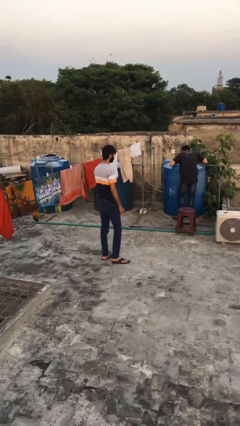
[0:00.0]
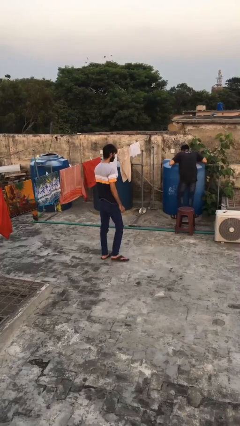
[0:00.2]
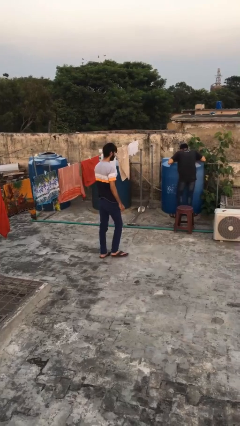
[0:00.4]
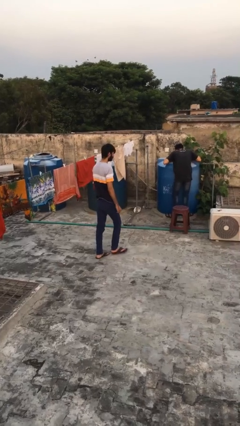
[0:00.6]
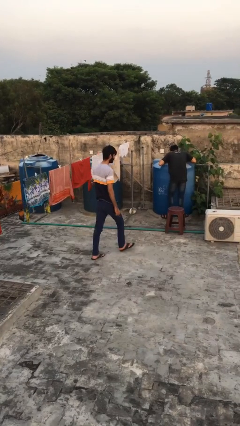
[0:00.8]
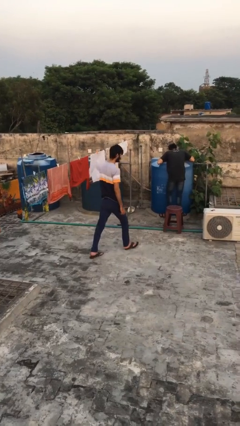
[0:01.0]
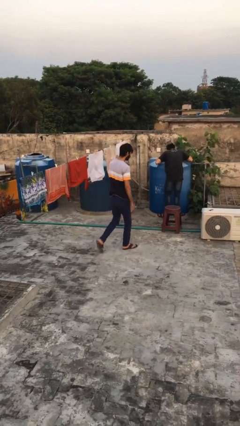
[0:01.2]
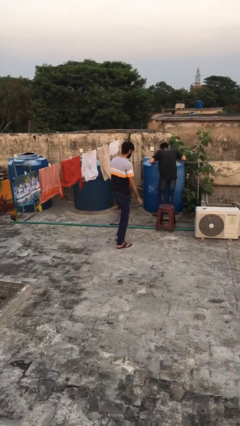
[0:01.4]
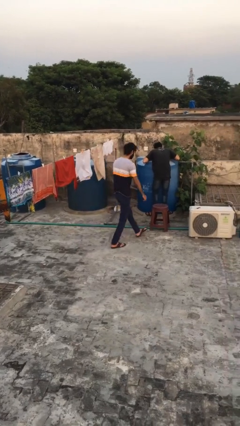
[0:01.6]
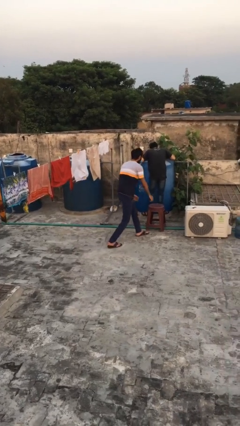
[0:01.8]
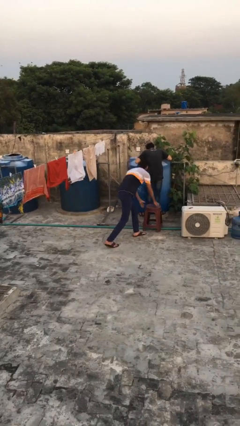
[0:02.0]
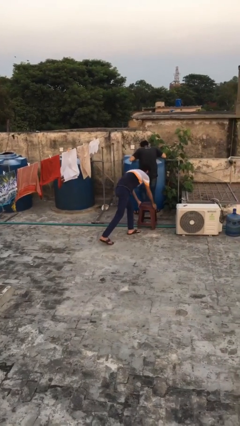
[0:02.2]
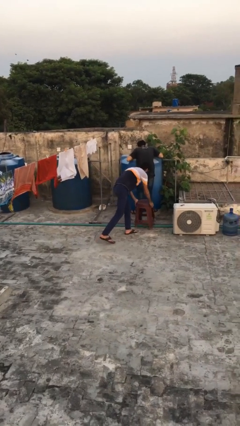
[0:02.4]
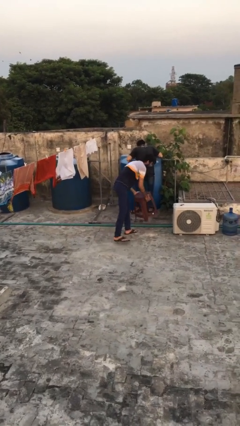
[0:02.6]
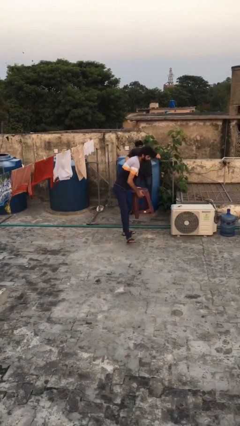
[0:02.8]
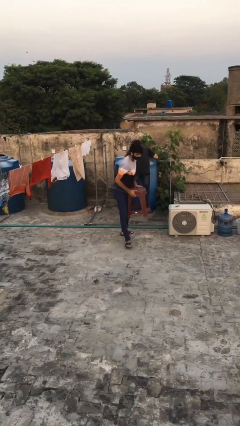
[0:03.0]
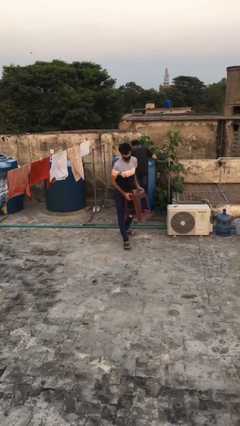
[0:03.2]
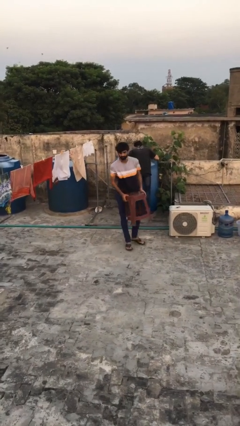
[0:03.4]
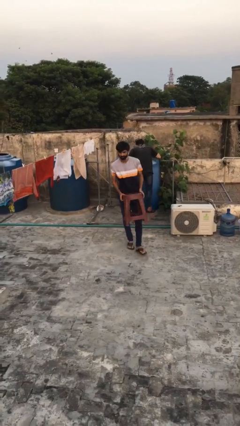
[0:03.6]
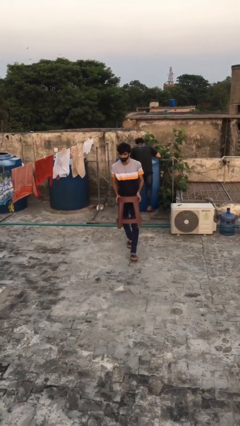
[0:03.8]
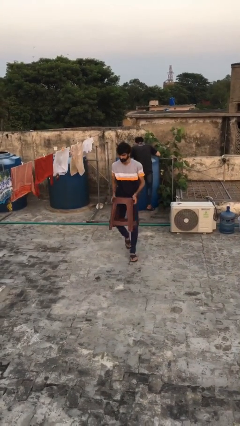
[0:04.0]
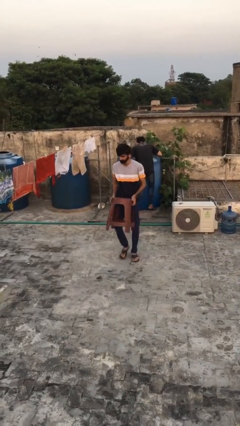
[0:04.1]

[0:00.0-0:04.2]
person steals object from person

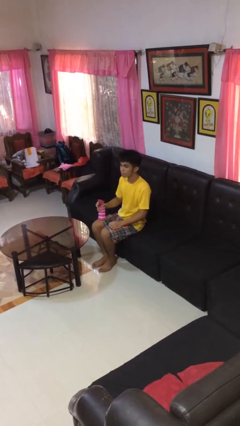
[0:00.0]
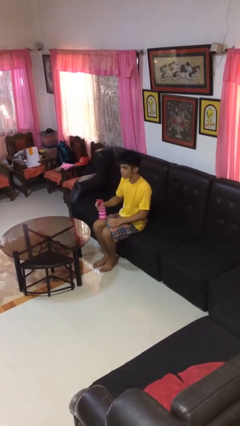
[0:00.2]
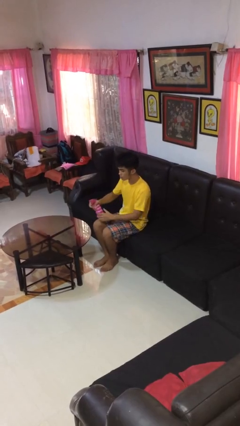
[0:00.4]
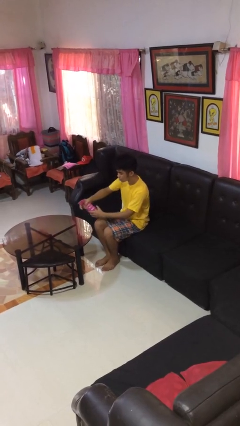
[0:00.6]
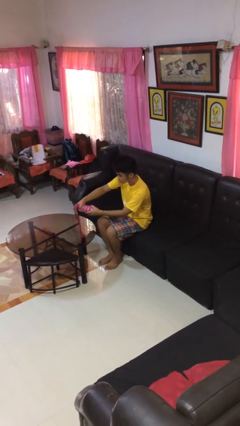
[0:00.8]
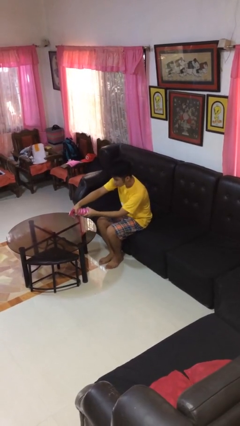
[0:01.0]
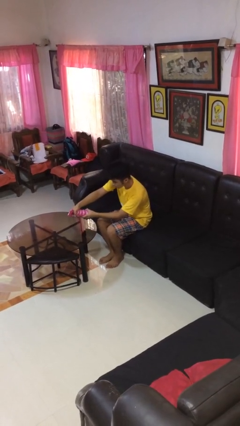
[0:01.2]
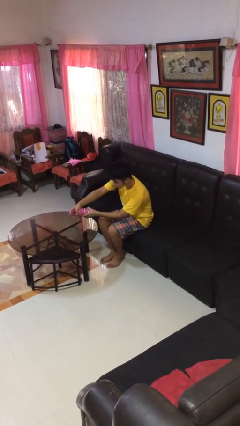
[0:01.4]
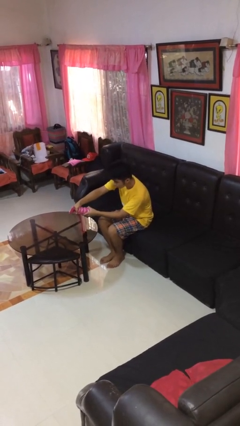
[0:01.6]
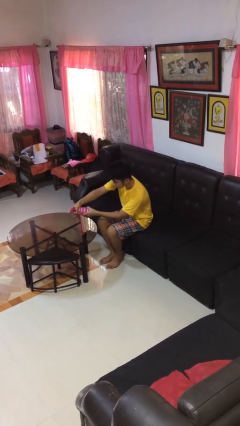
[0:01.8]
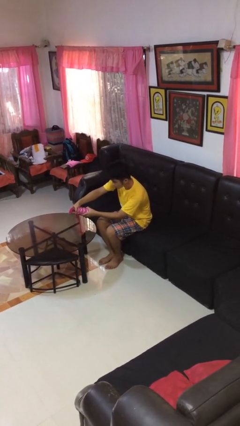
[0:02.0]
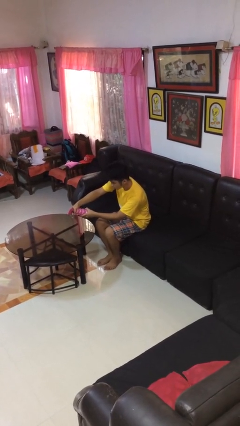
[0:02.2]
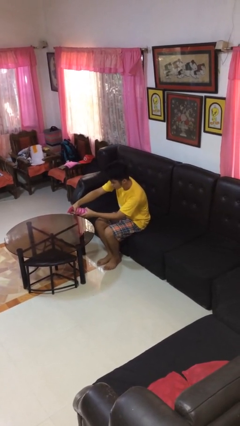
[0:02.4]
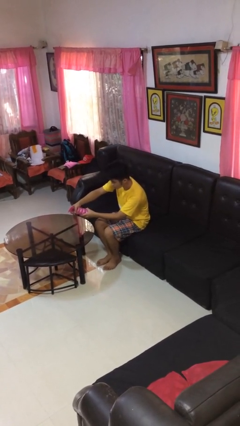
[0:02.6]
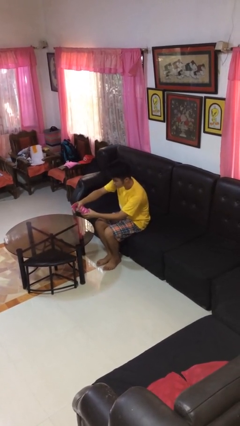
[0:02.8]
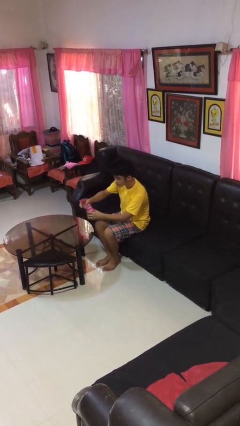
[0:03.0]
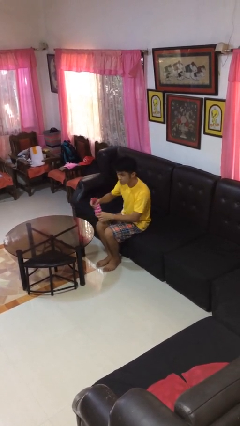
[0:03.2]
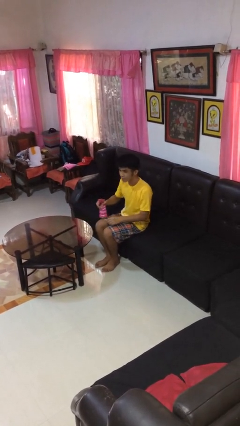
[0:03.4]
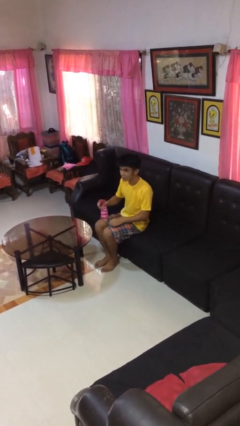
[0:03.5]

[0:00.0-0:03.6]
person sprays from bottle

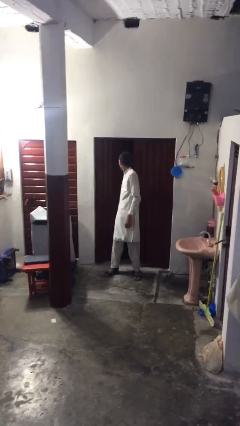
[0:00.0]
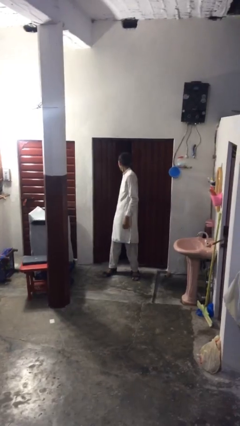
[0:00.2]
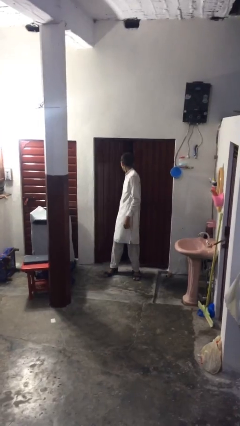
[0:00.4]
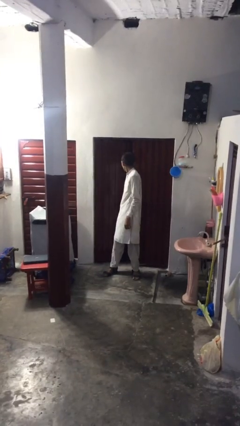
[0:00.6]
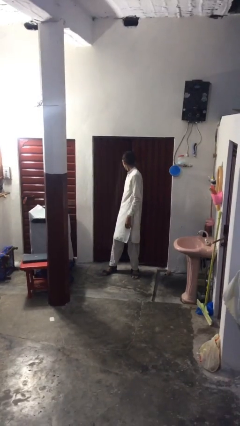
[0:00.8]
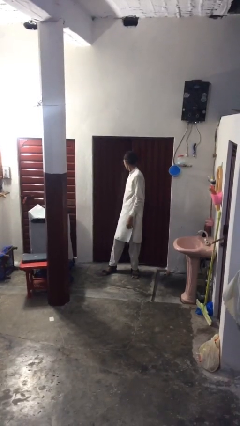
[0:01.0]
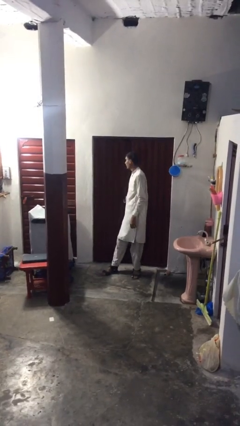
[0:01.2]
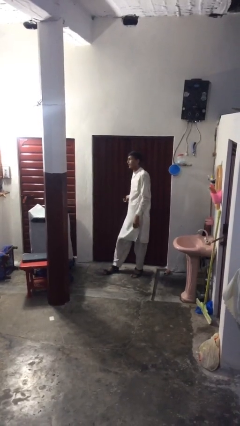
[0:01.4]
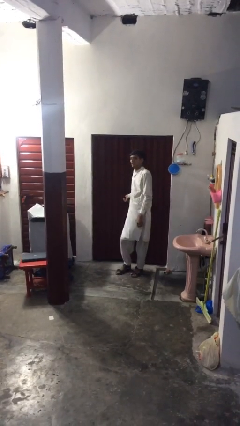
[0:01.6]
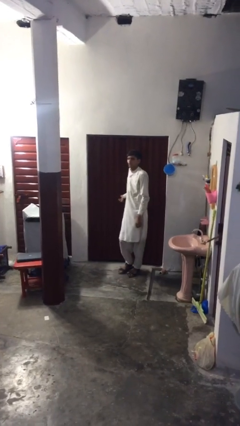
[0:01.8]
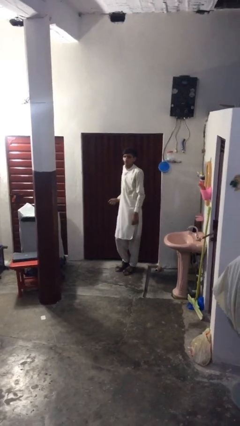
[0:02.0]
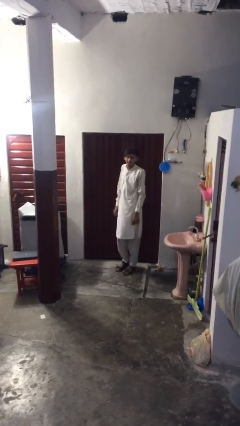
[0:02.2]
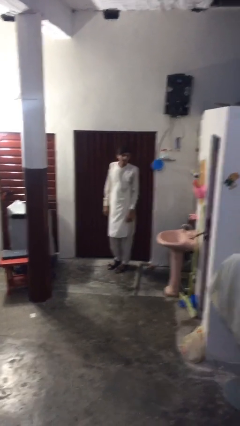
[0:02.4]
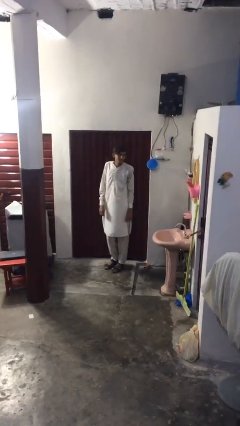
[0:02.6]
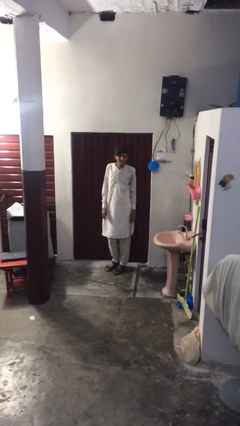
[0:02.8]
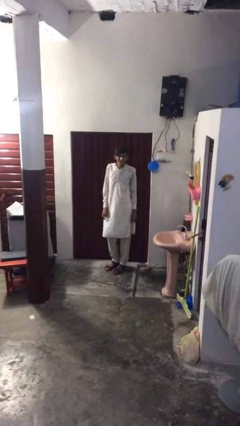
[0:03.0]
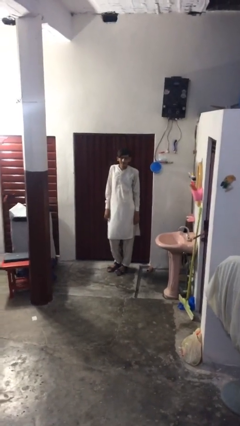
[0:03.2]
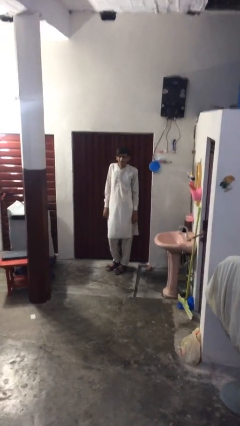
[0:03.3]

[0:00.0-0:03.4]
person closes facility door

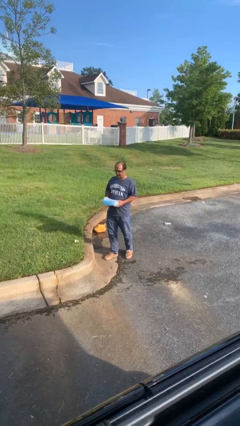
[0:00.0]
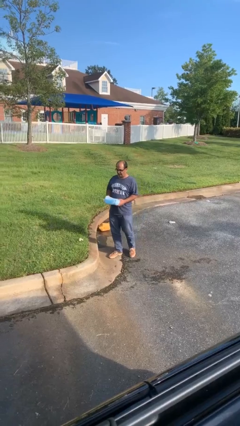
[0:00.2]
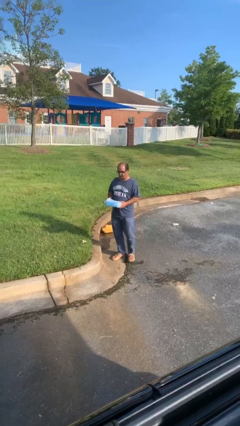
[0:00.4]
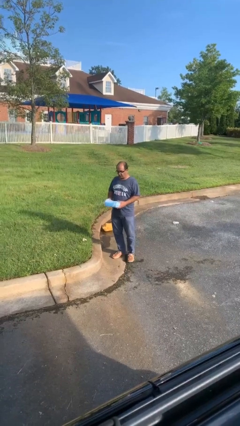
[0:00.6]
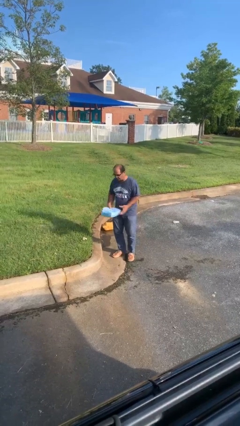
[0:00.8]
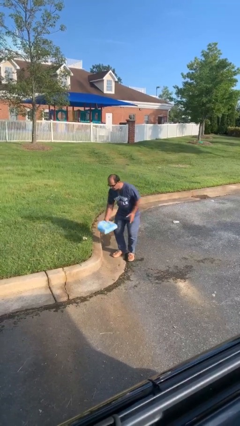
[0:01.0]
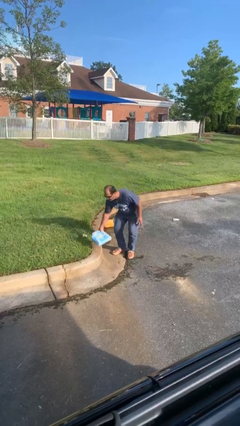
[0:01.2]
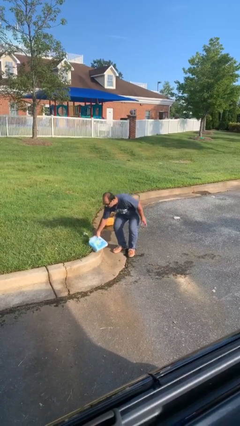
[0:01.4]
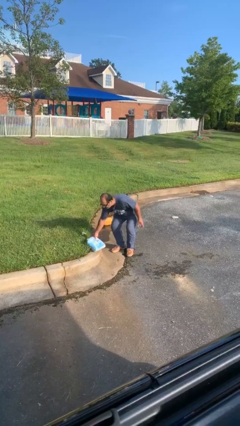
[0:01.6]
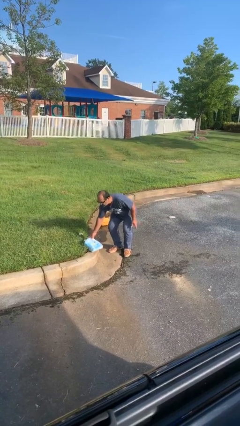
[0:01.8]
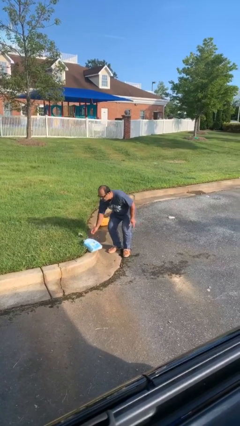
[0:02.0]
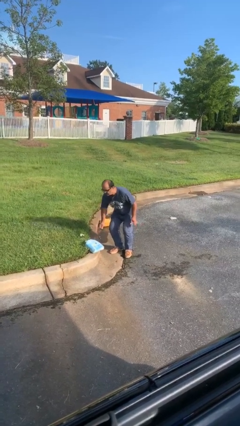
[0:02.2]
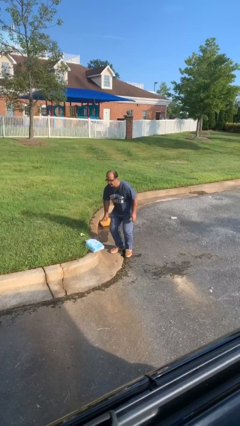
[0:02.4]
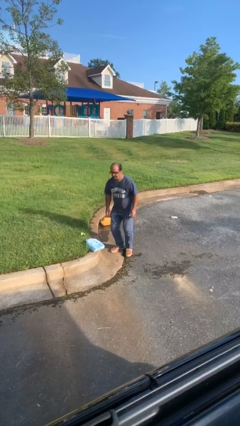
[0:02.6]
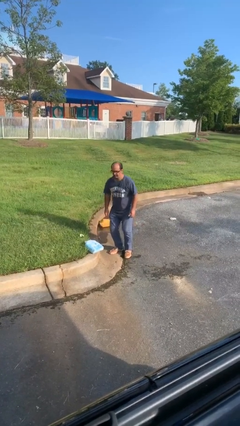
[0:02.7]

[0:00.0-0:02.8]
person puts down object on floor

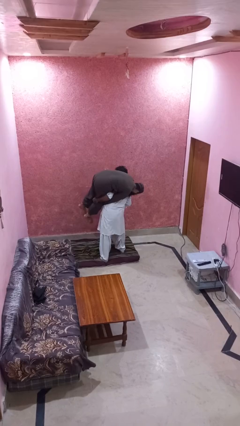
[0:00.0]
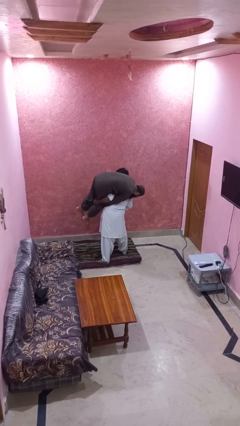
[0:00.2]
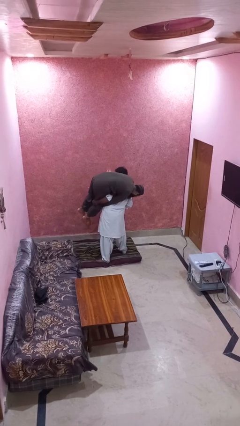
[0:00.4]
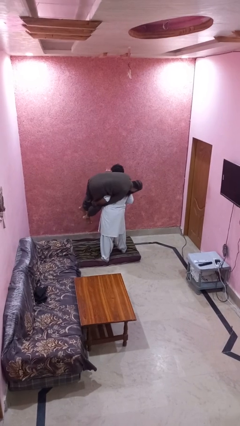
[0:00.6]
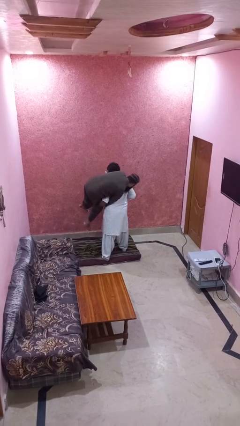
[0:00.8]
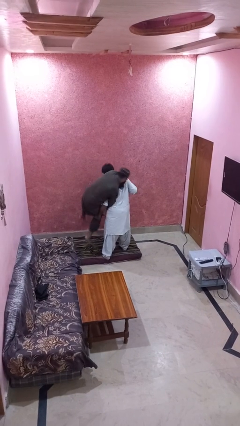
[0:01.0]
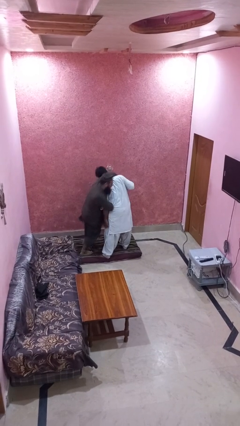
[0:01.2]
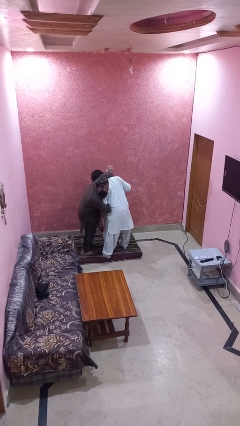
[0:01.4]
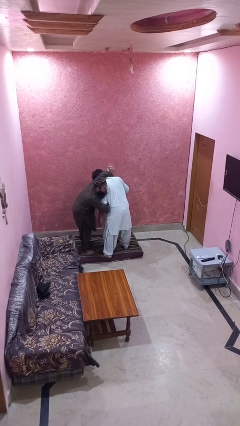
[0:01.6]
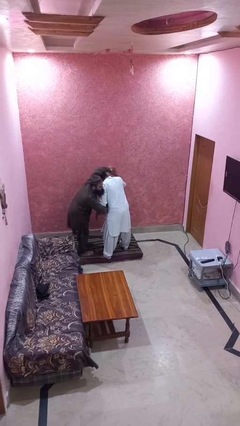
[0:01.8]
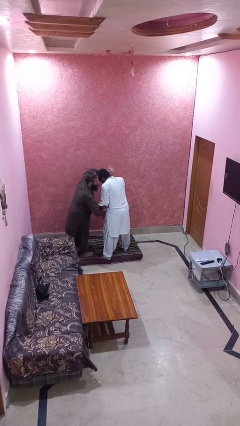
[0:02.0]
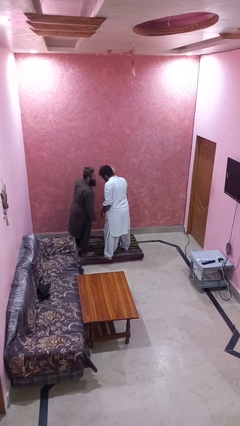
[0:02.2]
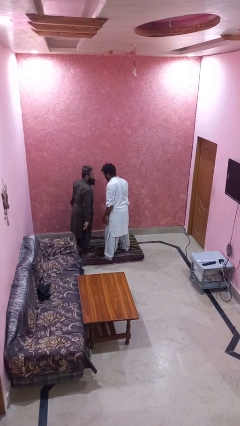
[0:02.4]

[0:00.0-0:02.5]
person puts down person

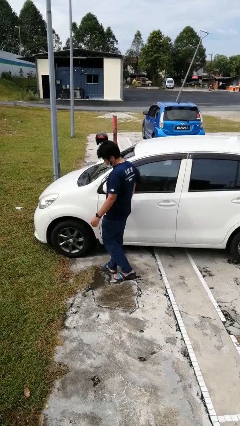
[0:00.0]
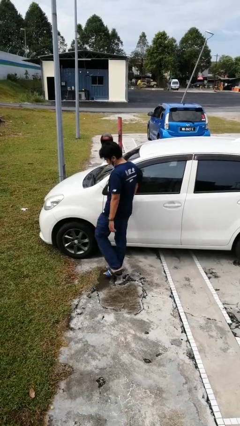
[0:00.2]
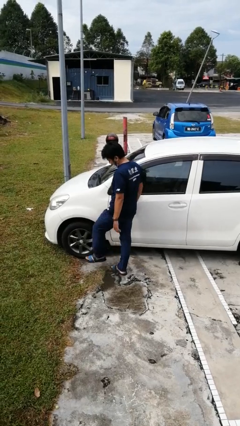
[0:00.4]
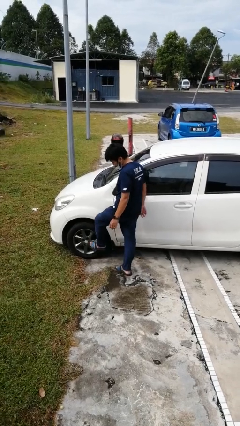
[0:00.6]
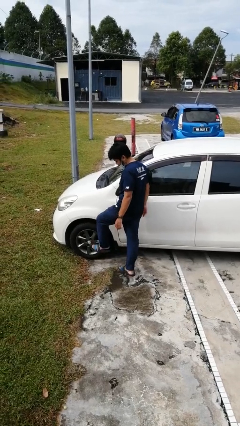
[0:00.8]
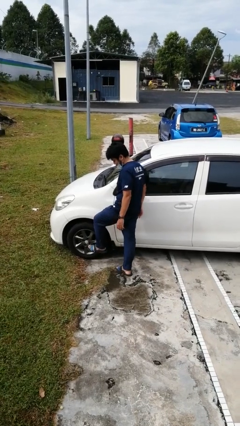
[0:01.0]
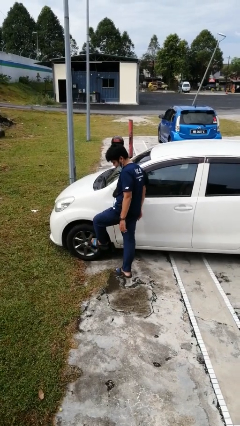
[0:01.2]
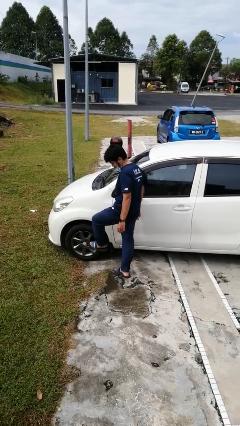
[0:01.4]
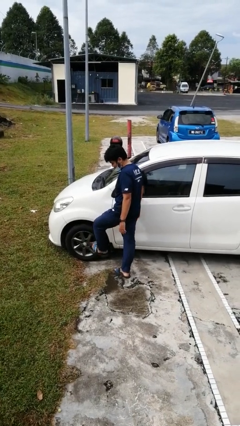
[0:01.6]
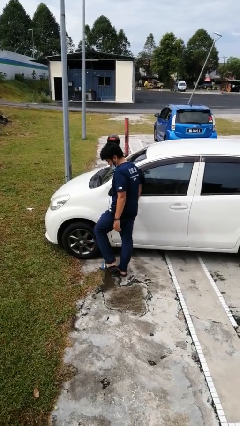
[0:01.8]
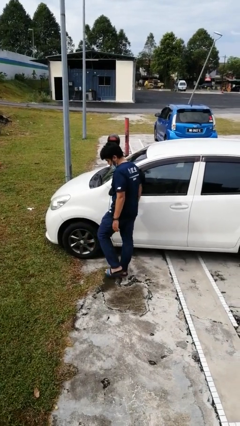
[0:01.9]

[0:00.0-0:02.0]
person kicks car tires
